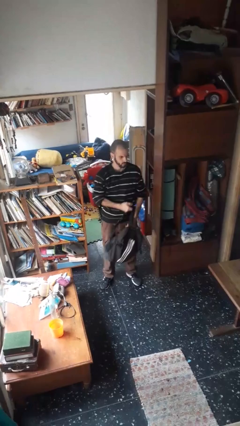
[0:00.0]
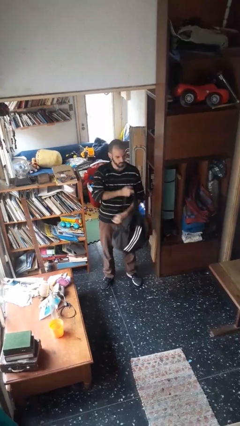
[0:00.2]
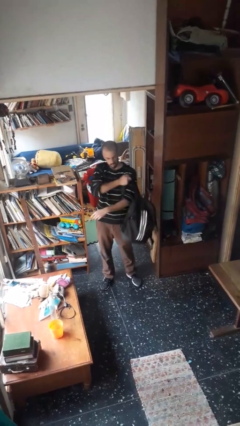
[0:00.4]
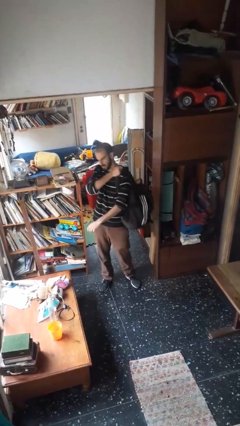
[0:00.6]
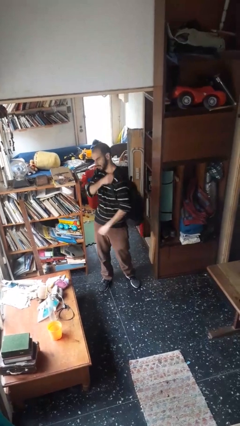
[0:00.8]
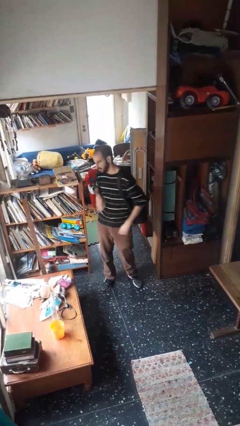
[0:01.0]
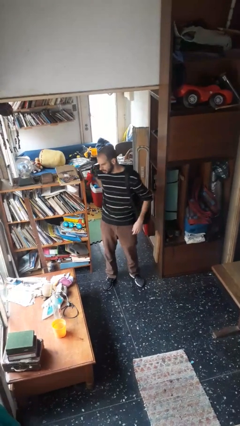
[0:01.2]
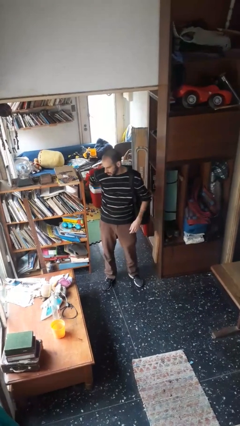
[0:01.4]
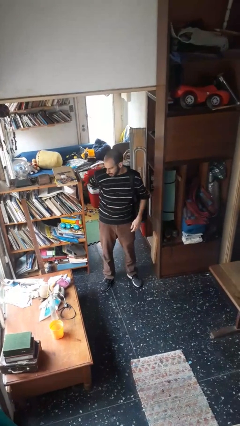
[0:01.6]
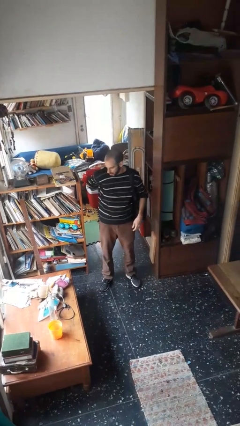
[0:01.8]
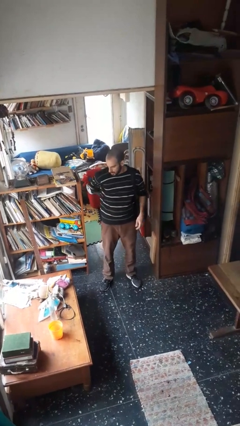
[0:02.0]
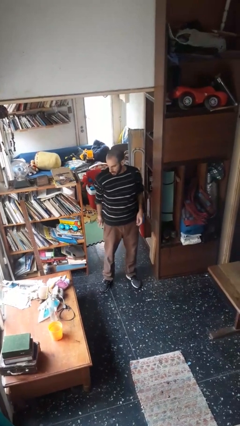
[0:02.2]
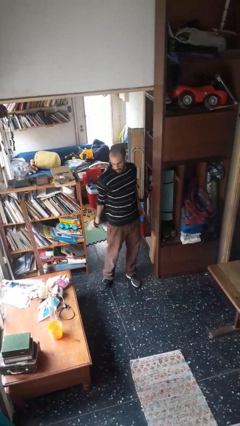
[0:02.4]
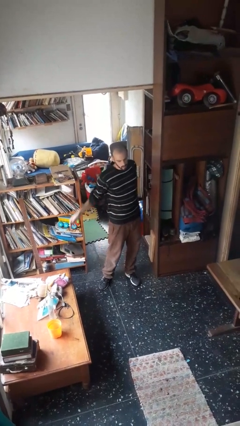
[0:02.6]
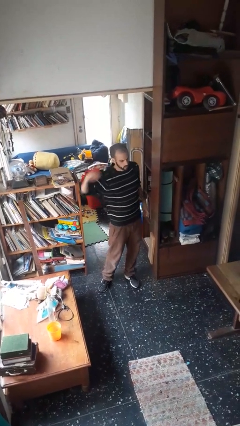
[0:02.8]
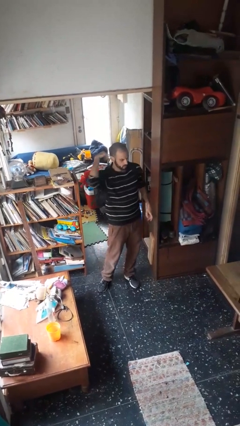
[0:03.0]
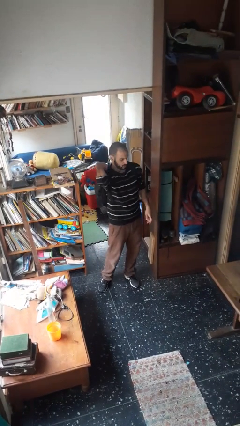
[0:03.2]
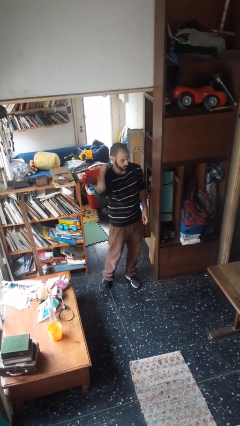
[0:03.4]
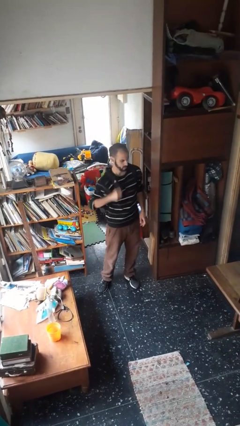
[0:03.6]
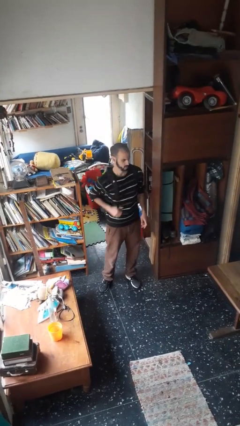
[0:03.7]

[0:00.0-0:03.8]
person puts on backpack

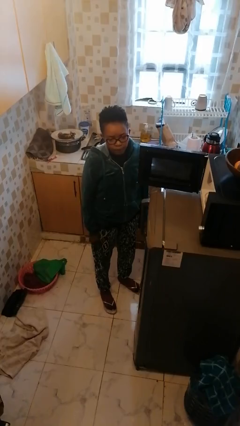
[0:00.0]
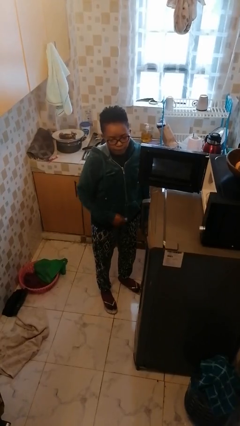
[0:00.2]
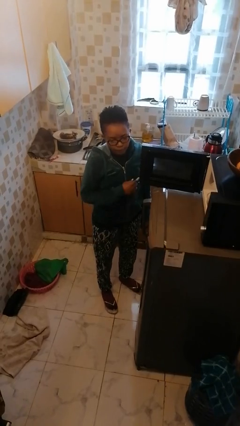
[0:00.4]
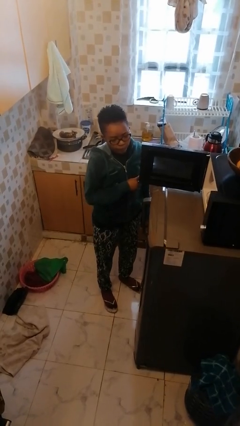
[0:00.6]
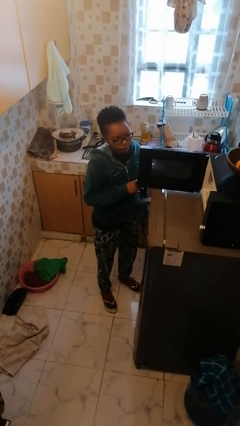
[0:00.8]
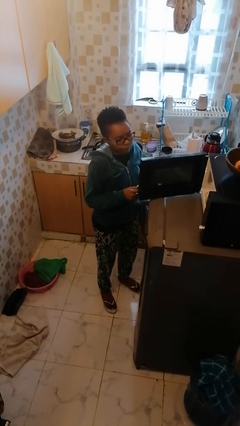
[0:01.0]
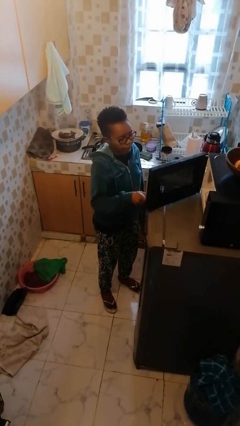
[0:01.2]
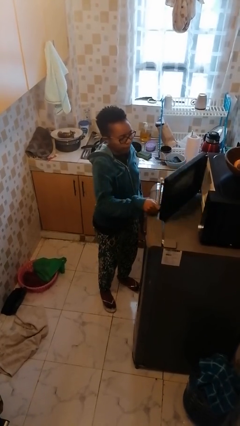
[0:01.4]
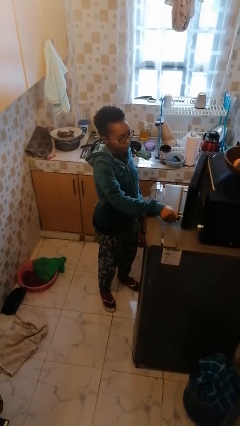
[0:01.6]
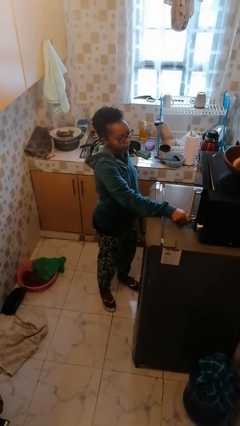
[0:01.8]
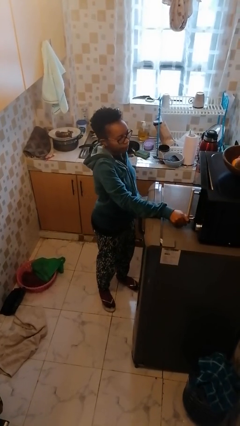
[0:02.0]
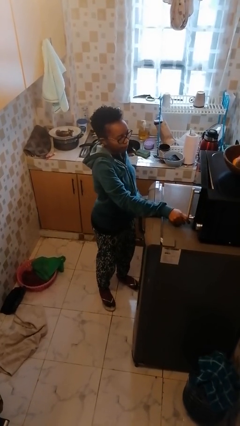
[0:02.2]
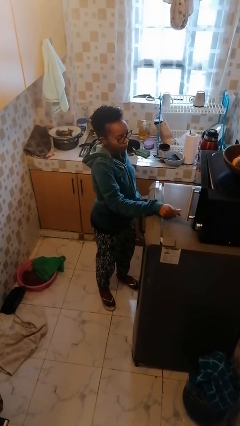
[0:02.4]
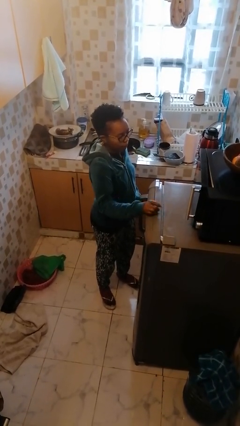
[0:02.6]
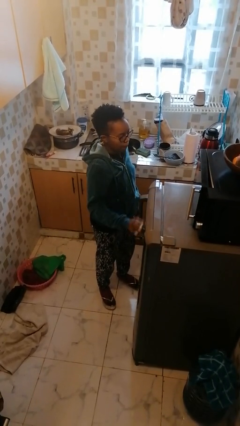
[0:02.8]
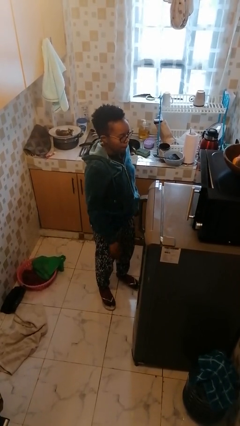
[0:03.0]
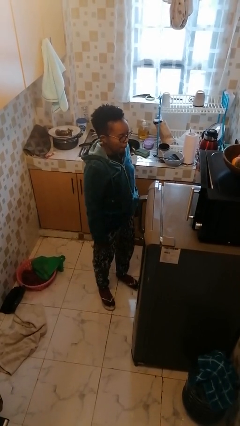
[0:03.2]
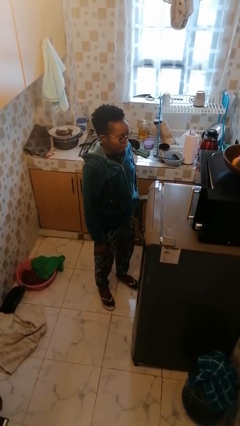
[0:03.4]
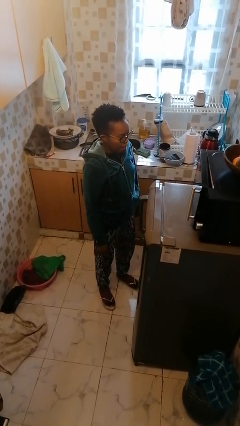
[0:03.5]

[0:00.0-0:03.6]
person closes microwave

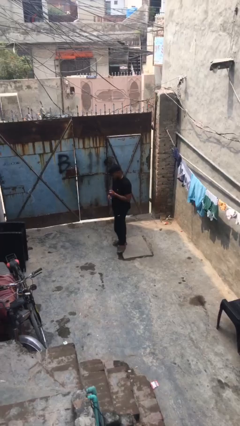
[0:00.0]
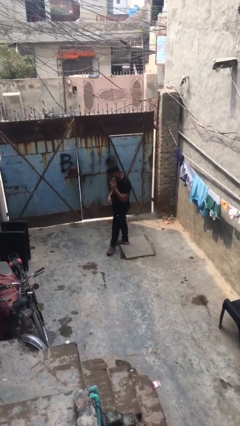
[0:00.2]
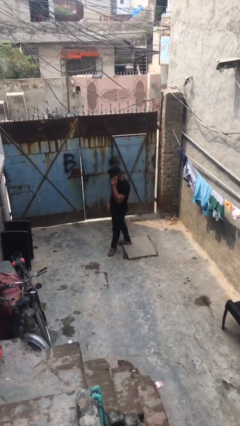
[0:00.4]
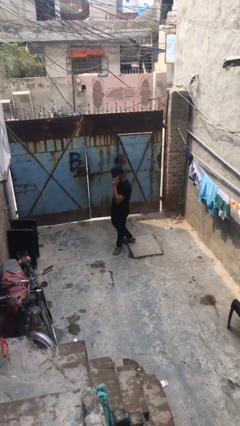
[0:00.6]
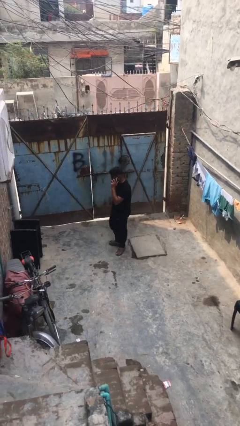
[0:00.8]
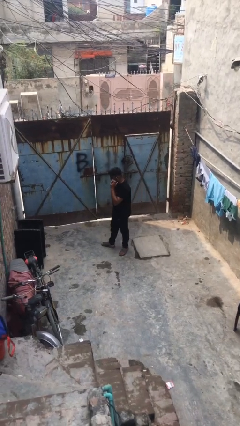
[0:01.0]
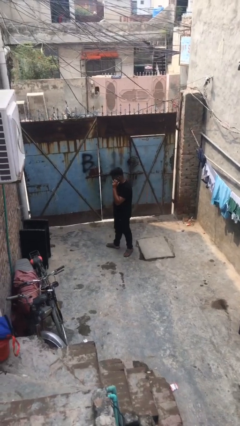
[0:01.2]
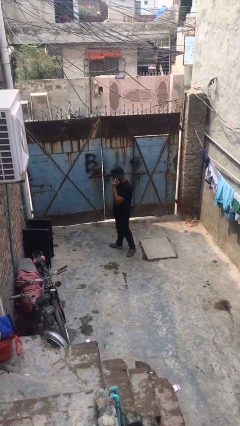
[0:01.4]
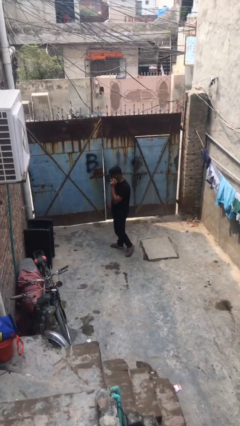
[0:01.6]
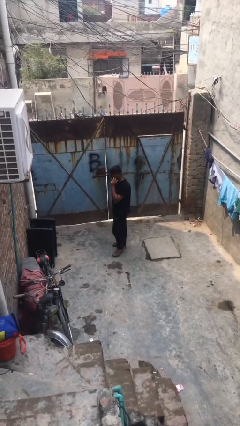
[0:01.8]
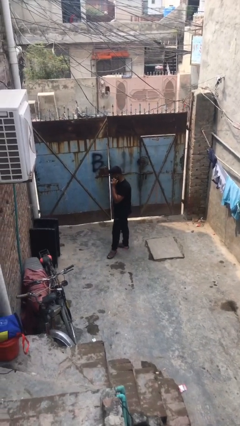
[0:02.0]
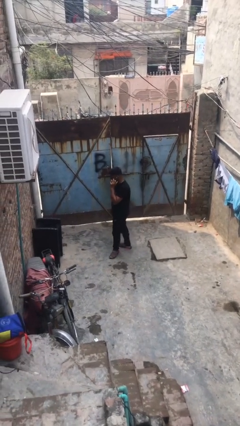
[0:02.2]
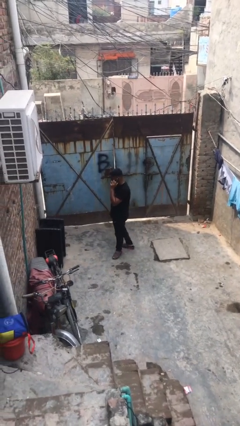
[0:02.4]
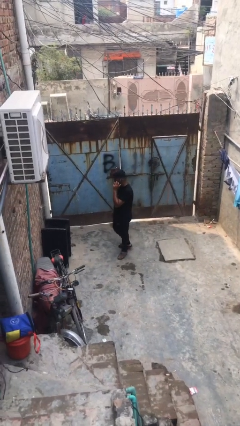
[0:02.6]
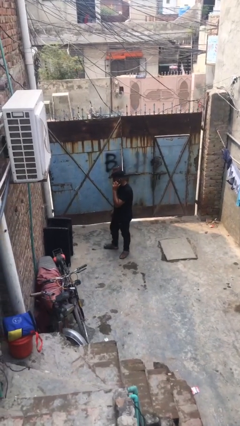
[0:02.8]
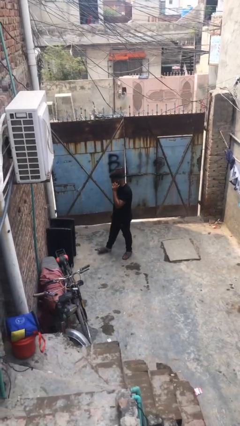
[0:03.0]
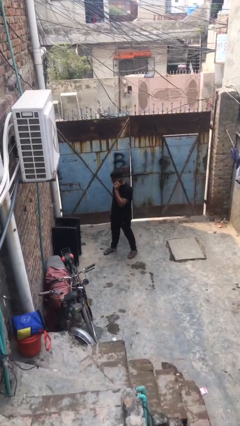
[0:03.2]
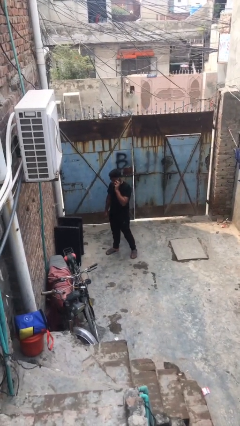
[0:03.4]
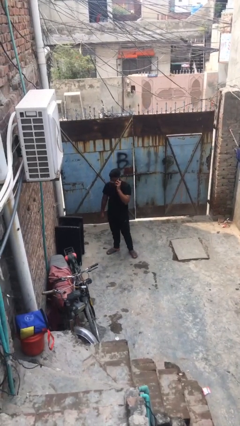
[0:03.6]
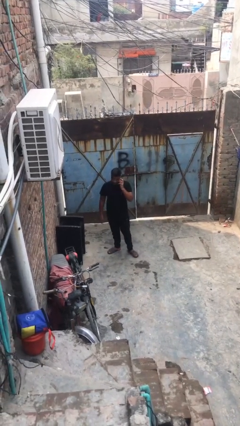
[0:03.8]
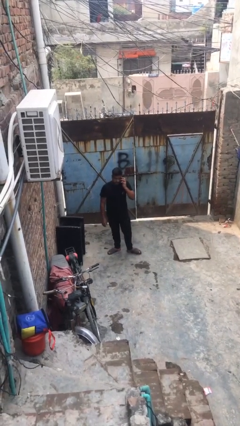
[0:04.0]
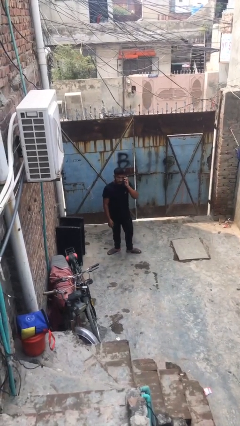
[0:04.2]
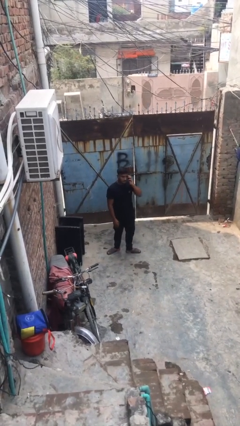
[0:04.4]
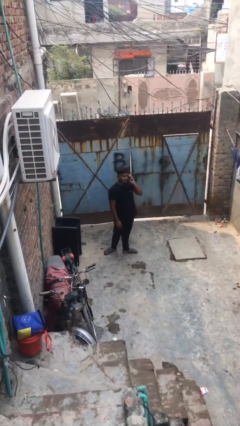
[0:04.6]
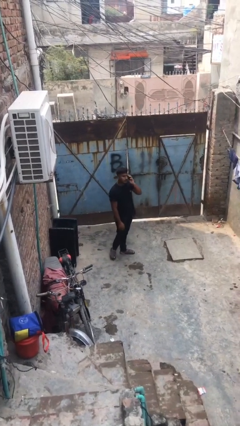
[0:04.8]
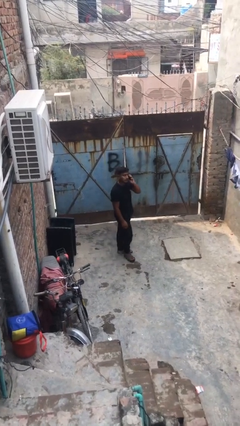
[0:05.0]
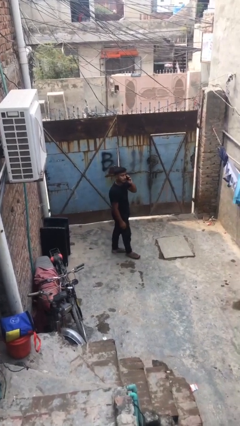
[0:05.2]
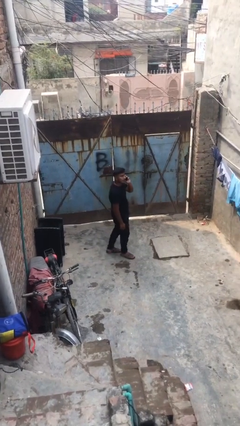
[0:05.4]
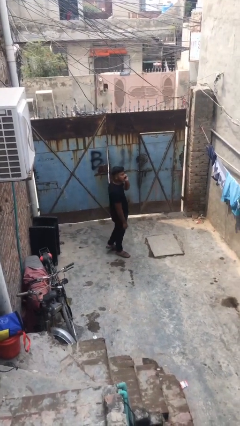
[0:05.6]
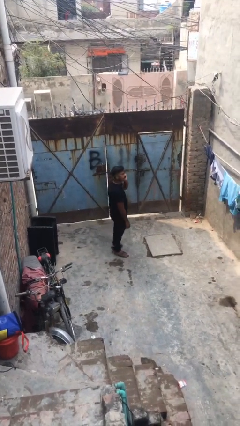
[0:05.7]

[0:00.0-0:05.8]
person talks on phone

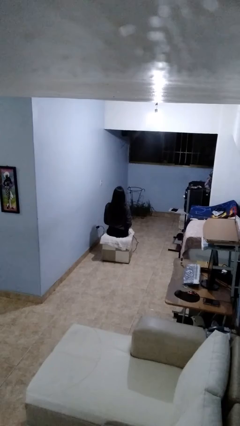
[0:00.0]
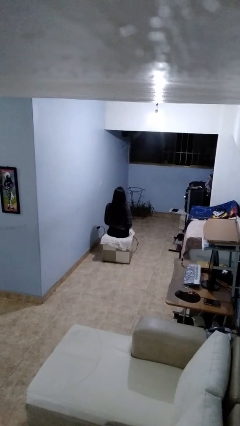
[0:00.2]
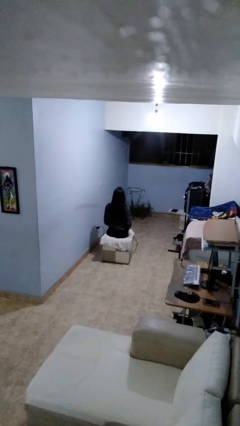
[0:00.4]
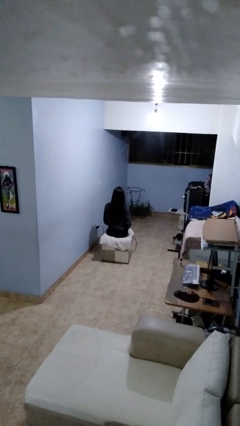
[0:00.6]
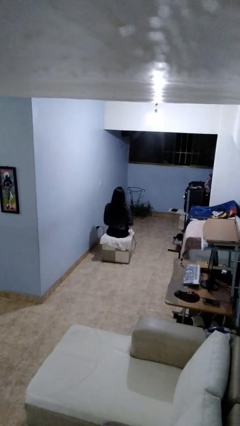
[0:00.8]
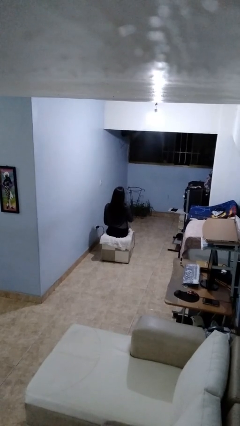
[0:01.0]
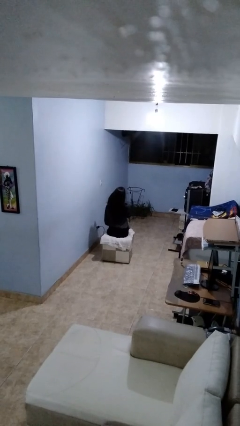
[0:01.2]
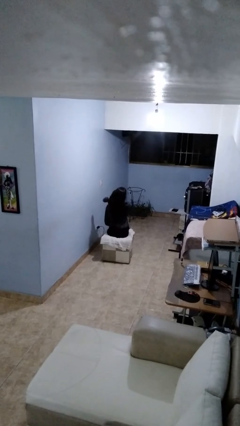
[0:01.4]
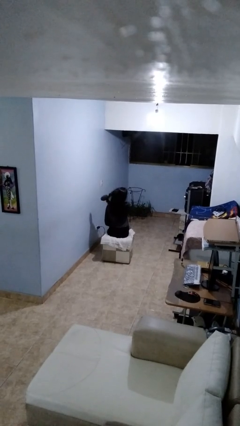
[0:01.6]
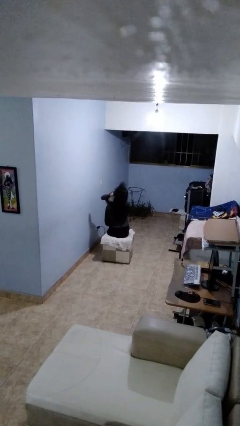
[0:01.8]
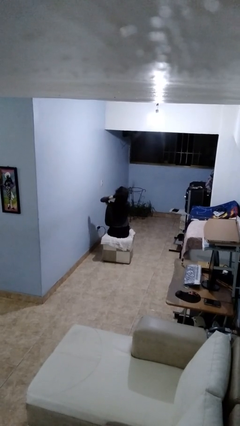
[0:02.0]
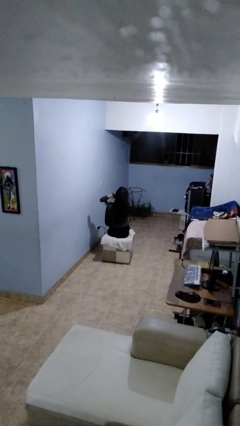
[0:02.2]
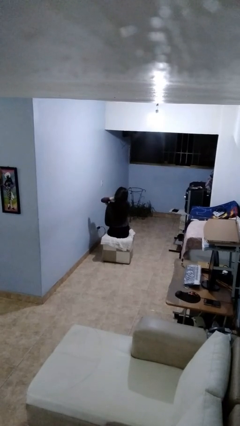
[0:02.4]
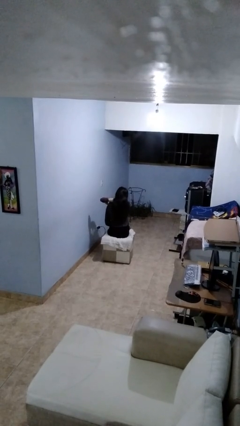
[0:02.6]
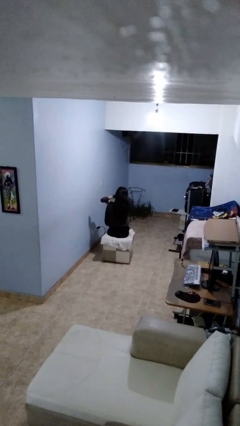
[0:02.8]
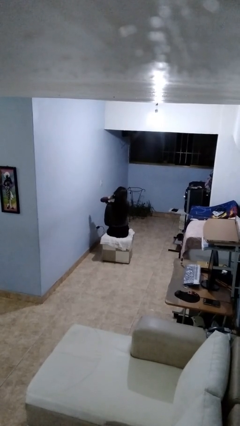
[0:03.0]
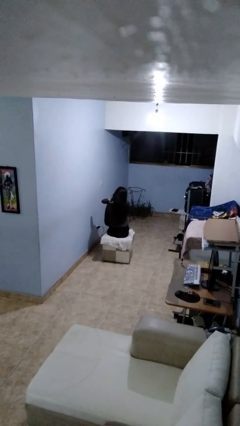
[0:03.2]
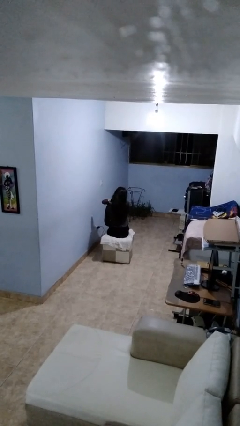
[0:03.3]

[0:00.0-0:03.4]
person dries hair with hairdryer

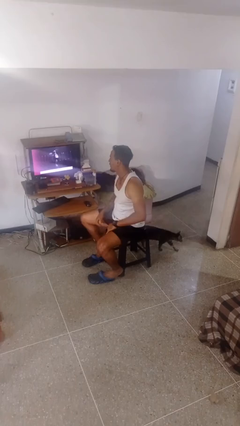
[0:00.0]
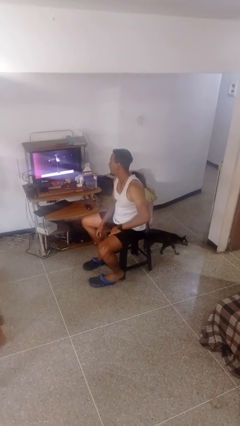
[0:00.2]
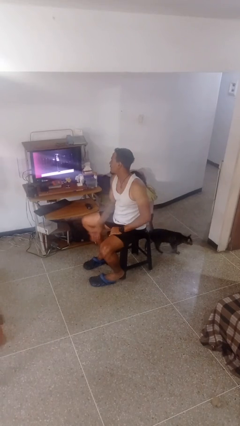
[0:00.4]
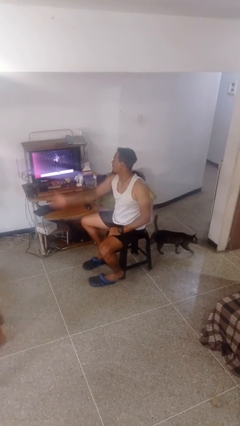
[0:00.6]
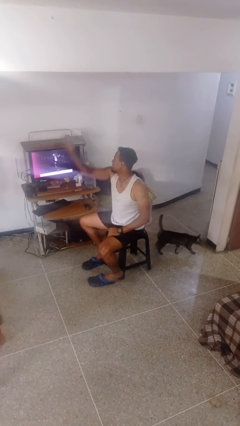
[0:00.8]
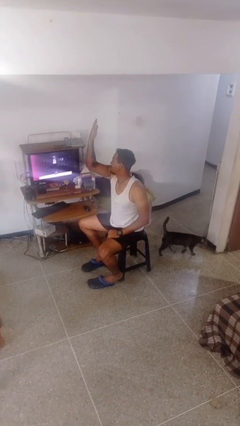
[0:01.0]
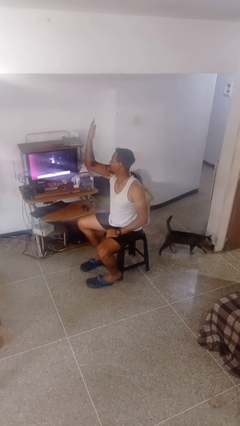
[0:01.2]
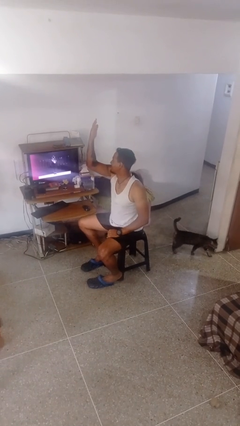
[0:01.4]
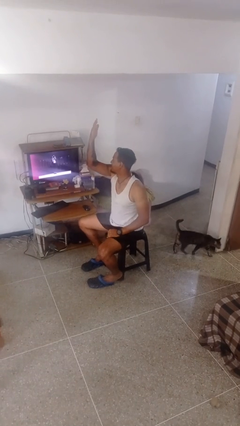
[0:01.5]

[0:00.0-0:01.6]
person gestures swipe up
